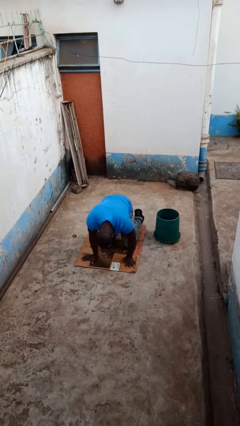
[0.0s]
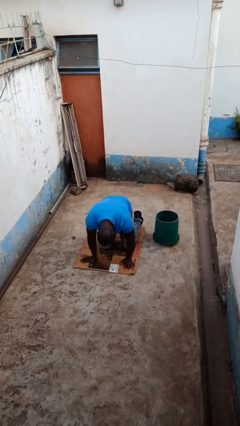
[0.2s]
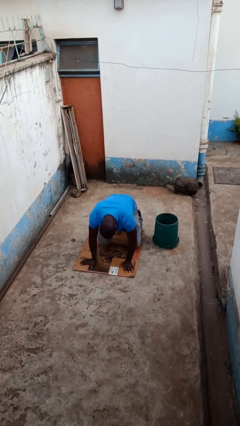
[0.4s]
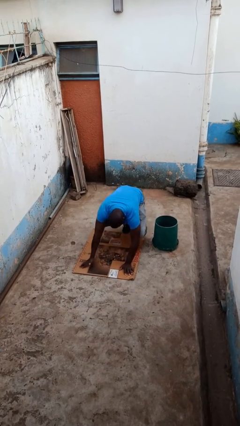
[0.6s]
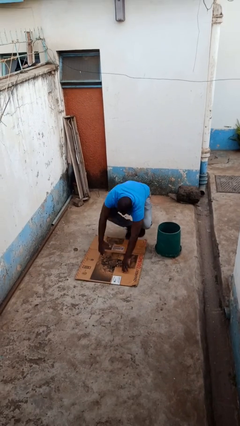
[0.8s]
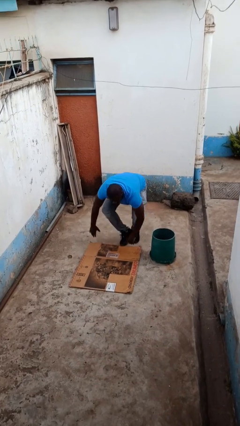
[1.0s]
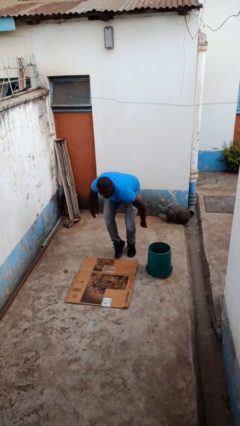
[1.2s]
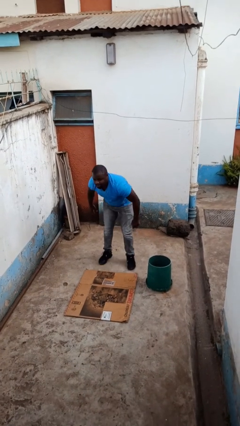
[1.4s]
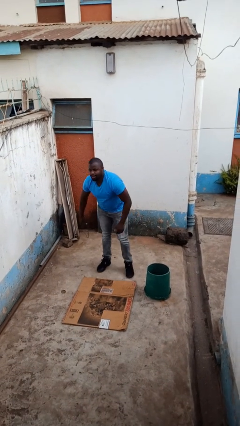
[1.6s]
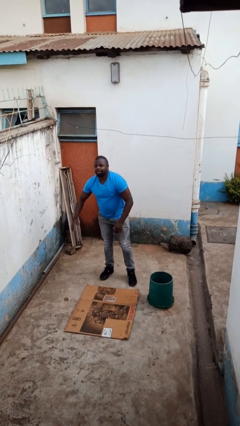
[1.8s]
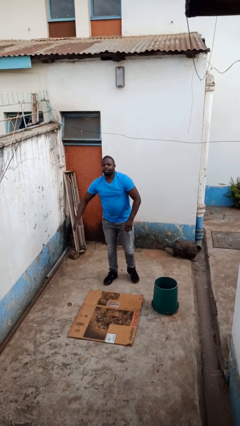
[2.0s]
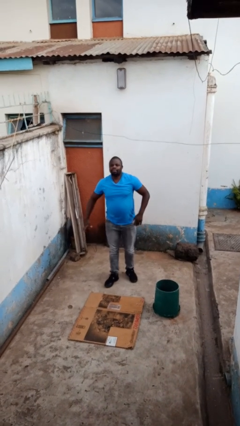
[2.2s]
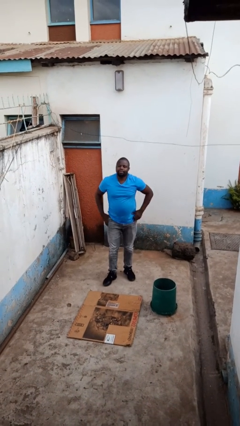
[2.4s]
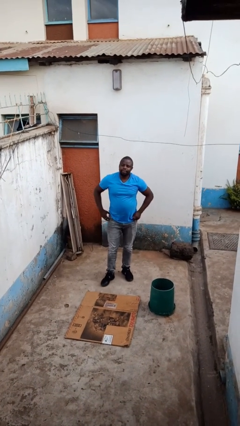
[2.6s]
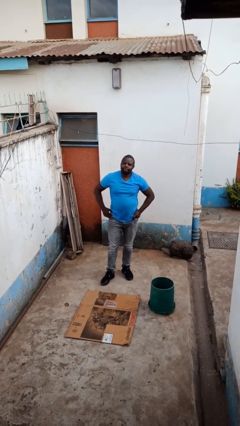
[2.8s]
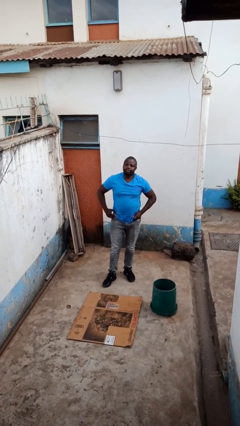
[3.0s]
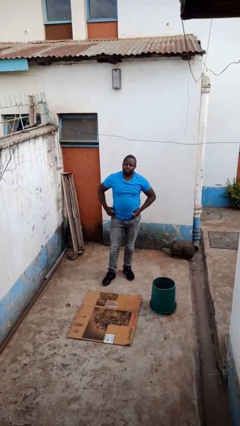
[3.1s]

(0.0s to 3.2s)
person stands up from floor

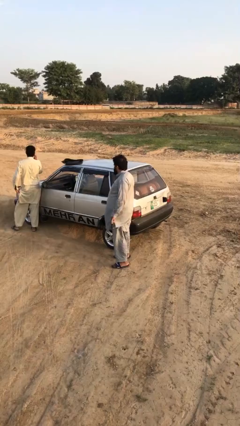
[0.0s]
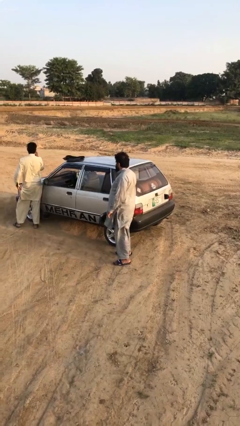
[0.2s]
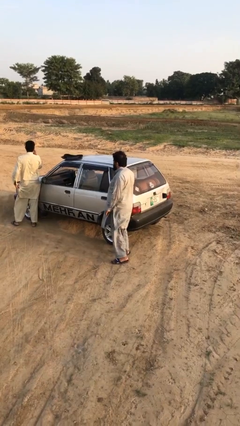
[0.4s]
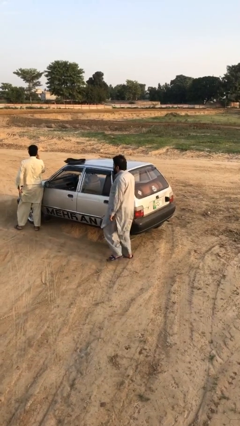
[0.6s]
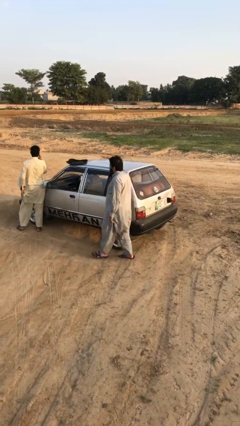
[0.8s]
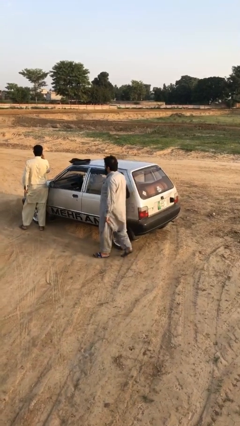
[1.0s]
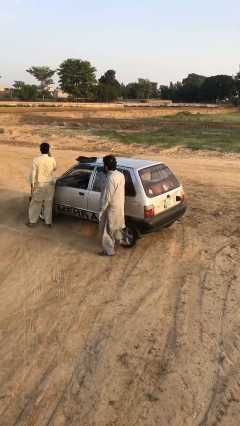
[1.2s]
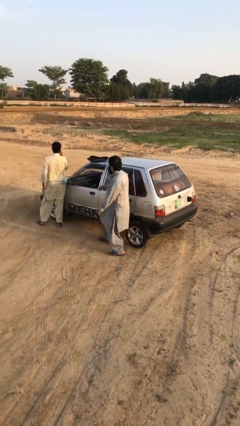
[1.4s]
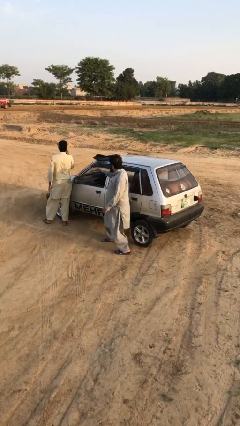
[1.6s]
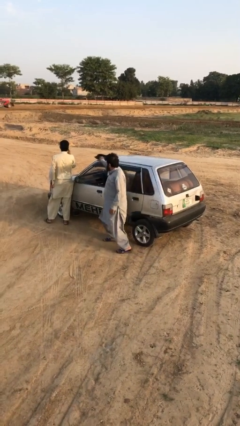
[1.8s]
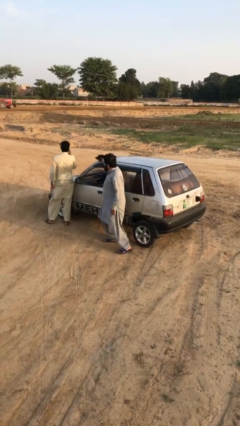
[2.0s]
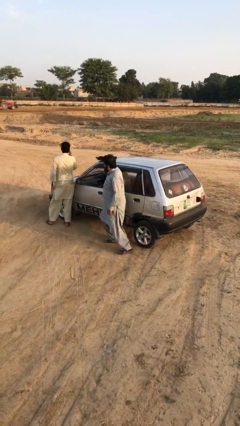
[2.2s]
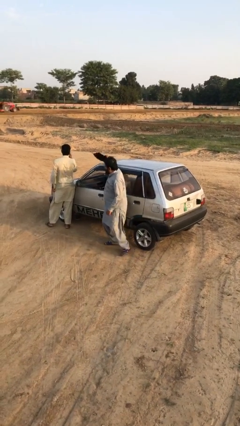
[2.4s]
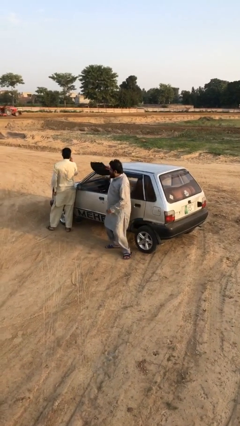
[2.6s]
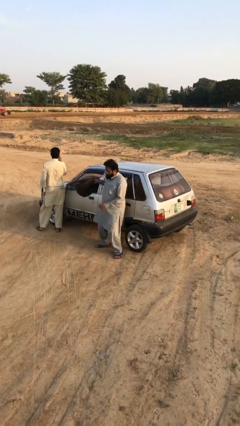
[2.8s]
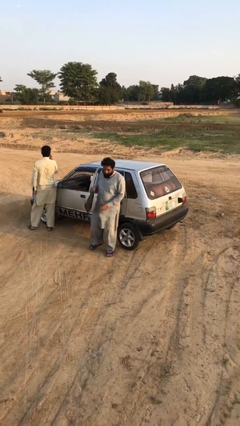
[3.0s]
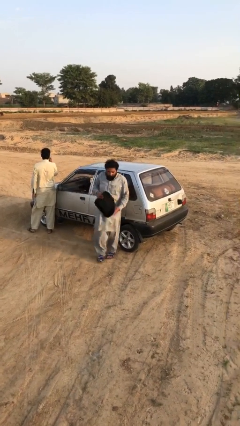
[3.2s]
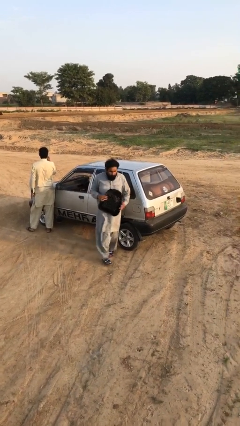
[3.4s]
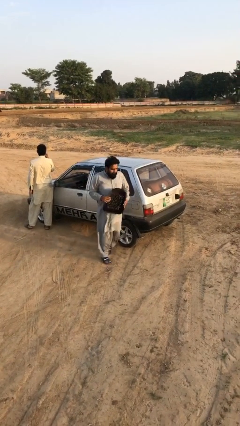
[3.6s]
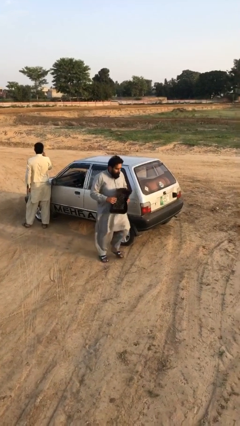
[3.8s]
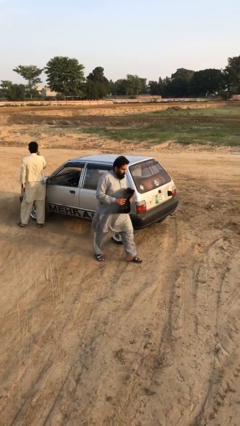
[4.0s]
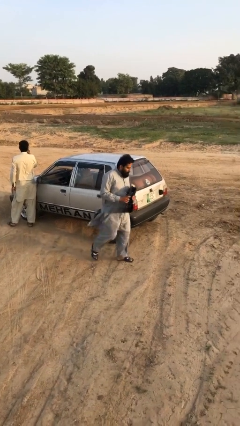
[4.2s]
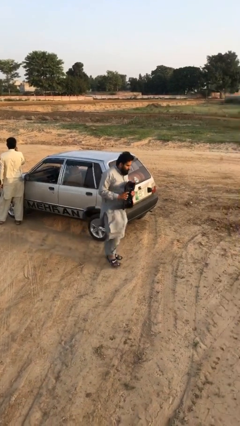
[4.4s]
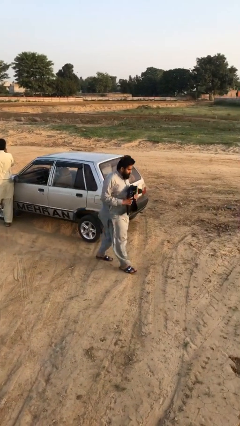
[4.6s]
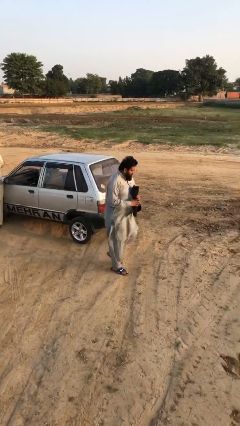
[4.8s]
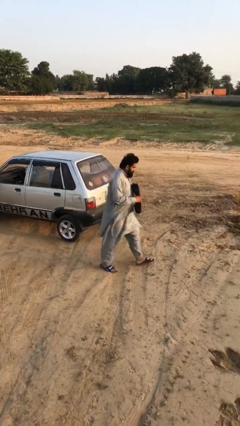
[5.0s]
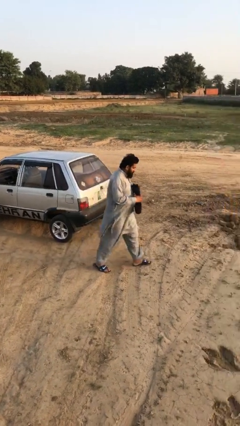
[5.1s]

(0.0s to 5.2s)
person steals object from person

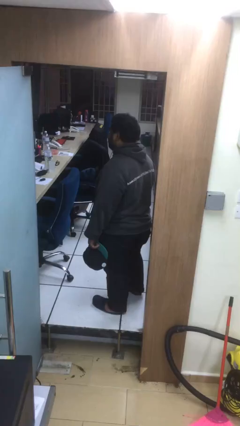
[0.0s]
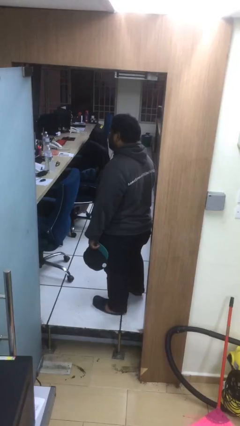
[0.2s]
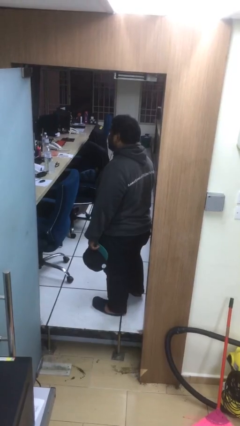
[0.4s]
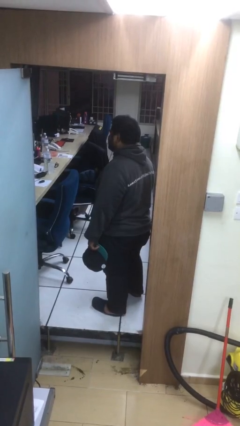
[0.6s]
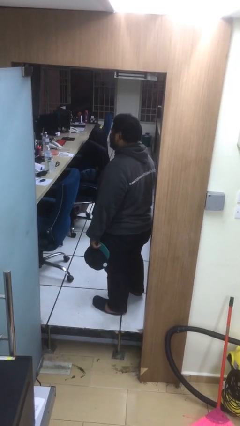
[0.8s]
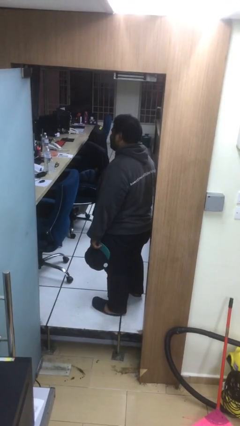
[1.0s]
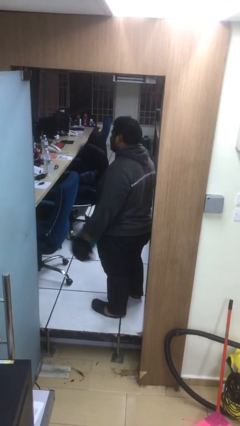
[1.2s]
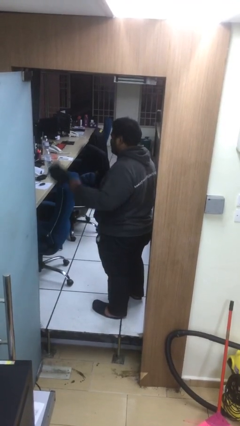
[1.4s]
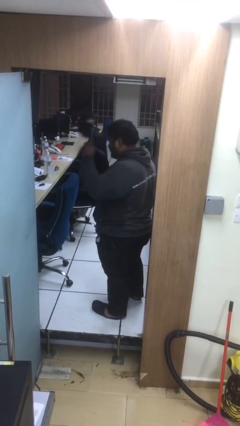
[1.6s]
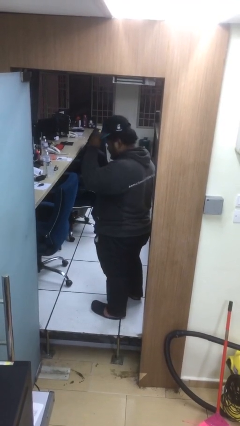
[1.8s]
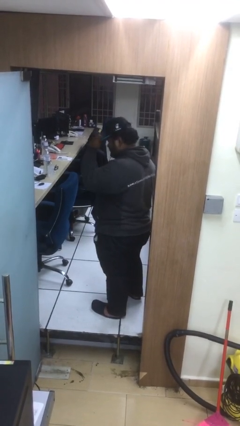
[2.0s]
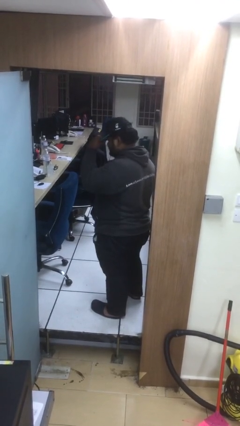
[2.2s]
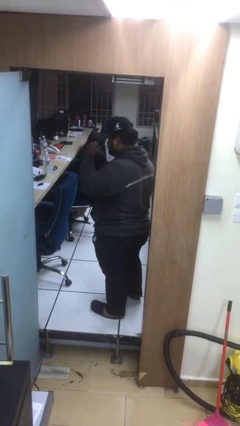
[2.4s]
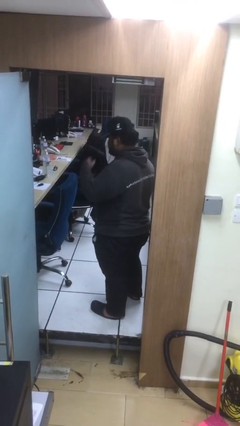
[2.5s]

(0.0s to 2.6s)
person puts on hat

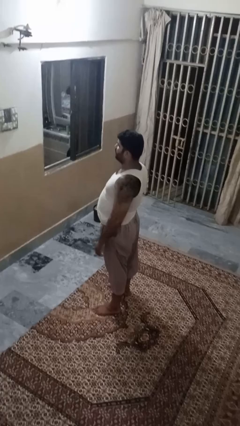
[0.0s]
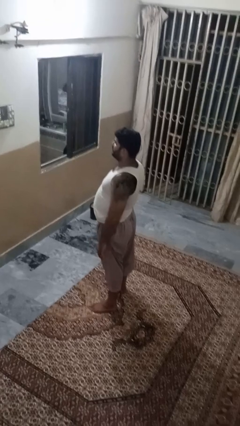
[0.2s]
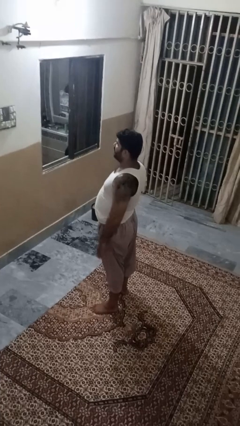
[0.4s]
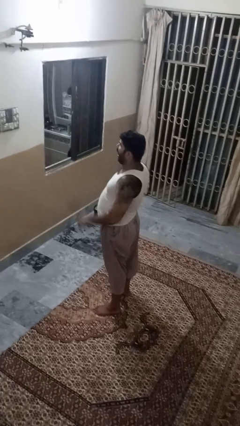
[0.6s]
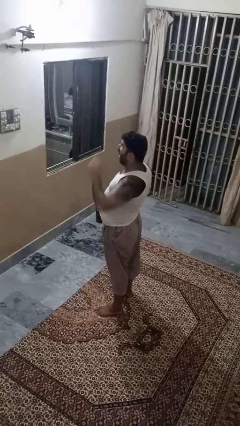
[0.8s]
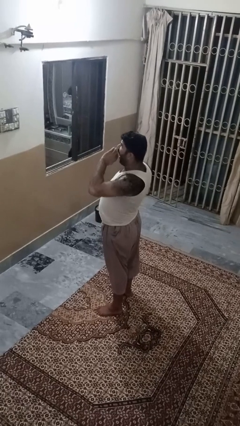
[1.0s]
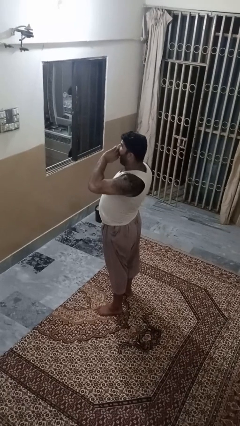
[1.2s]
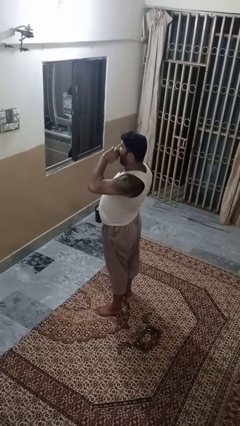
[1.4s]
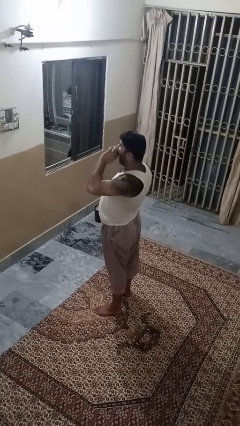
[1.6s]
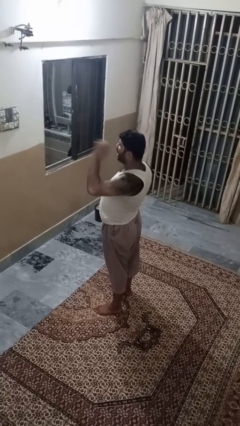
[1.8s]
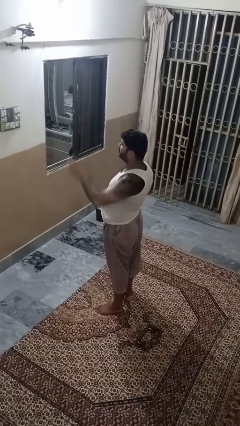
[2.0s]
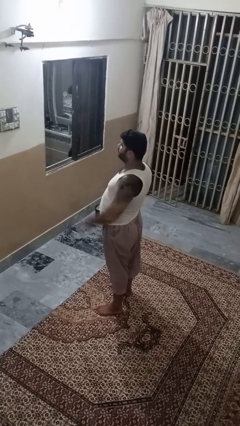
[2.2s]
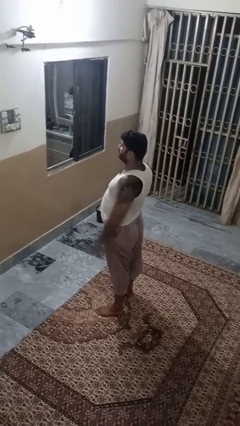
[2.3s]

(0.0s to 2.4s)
person yawns

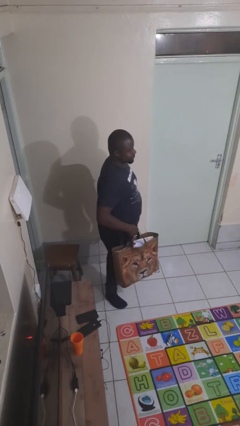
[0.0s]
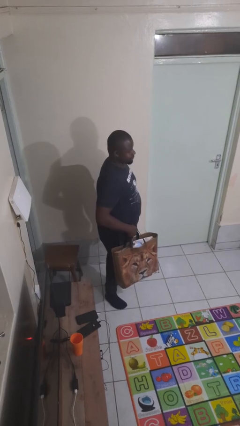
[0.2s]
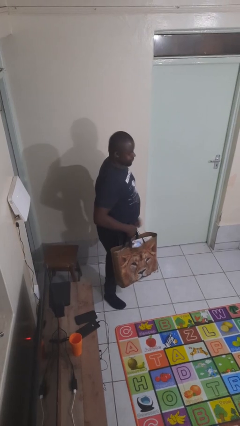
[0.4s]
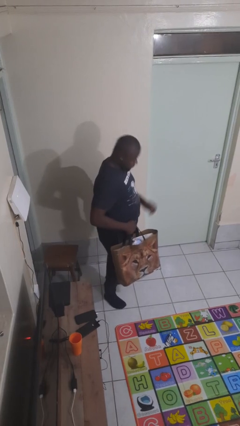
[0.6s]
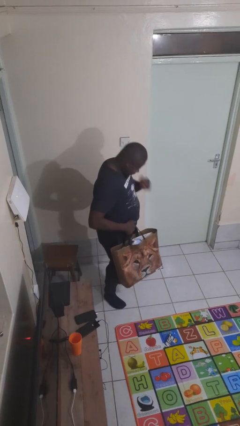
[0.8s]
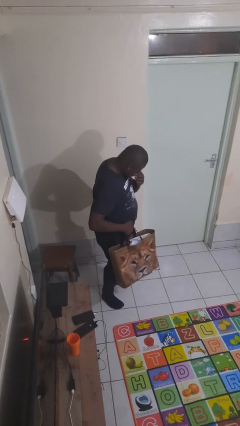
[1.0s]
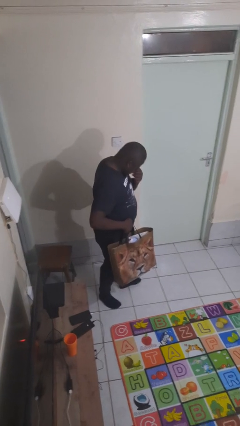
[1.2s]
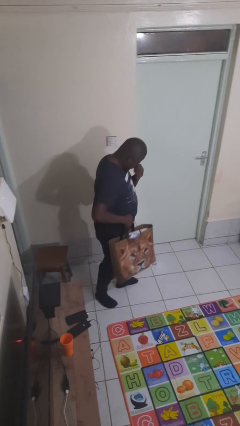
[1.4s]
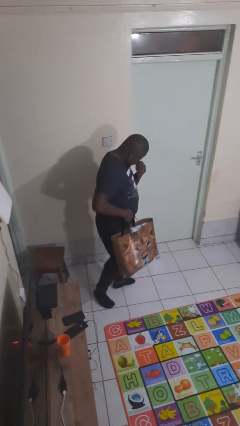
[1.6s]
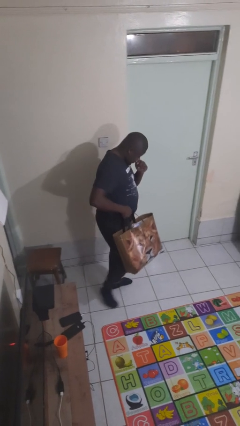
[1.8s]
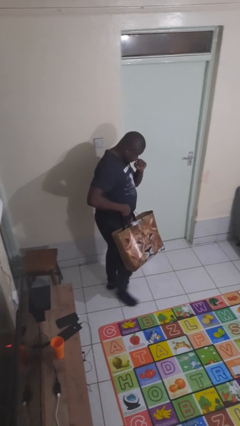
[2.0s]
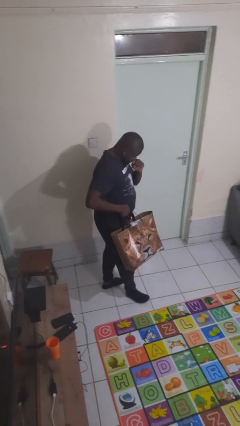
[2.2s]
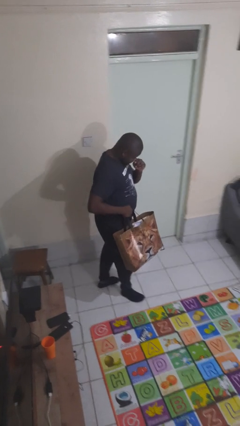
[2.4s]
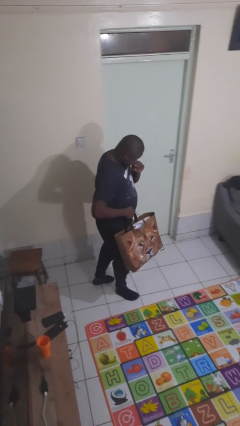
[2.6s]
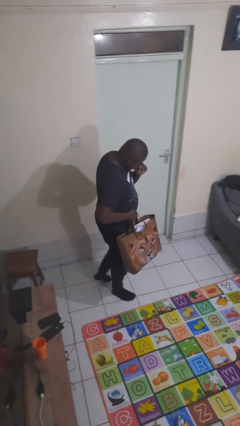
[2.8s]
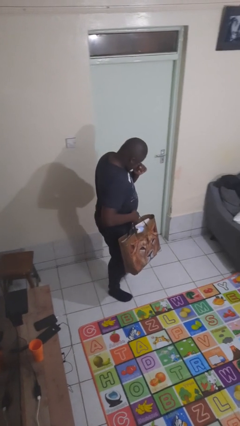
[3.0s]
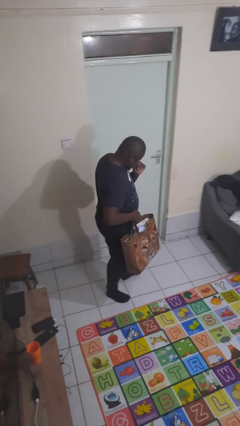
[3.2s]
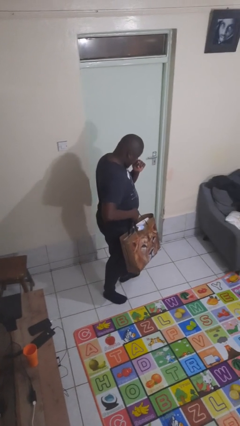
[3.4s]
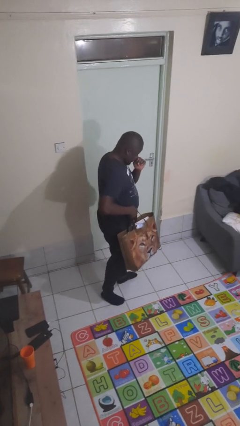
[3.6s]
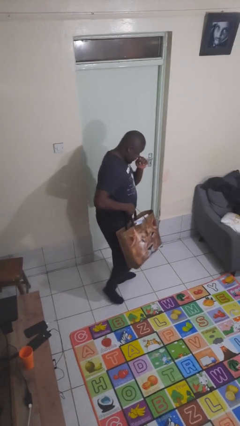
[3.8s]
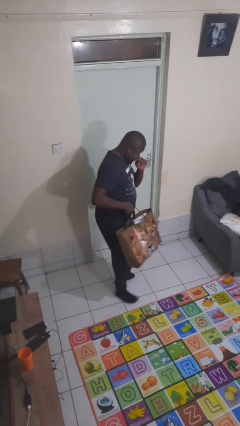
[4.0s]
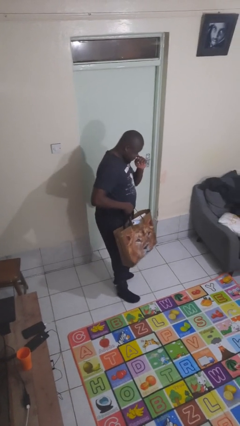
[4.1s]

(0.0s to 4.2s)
person carries groceries
